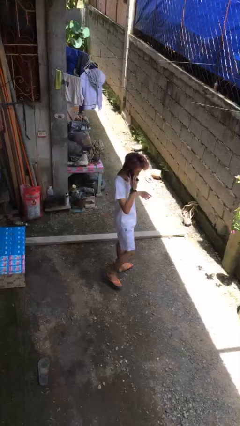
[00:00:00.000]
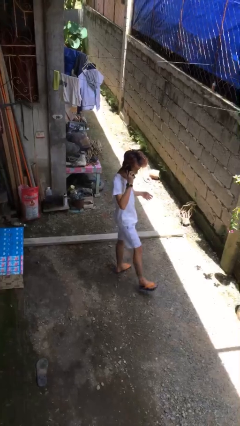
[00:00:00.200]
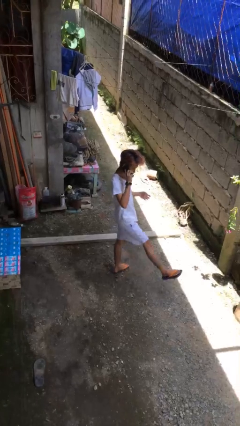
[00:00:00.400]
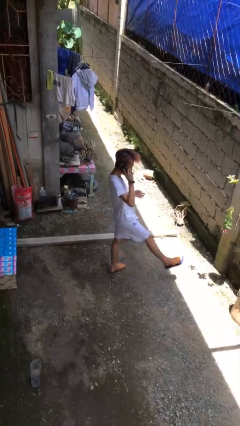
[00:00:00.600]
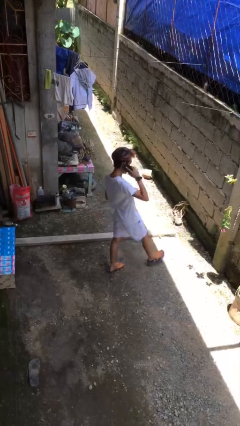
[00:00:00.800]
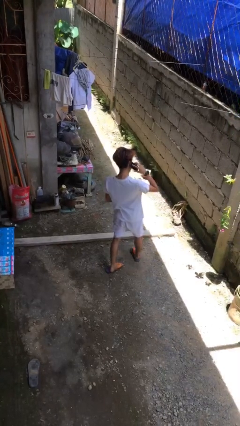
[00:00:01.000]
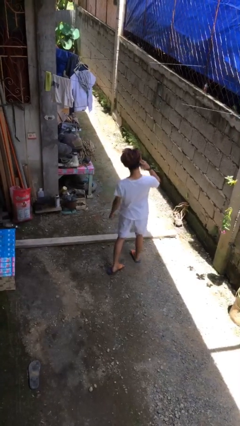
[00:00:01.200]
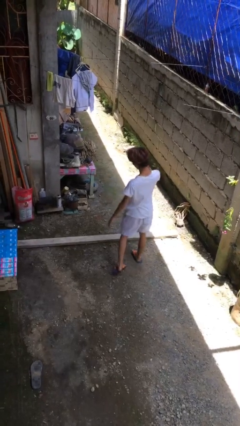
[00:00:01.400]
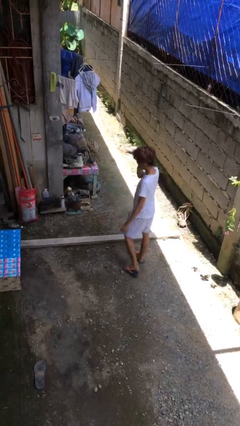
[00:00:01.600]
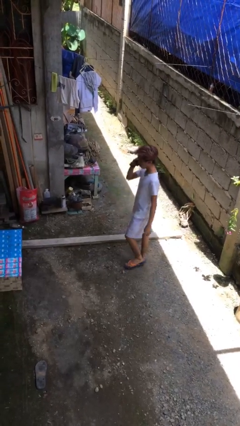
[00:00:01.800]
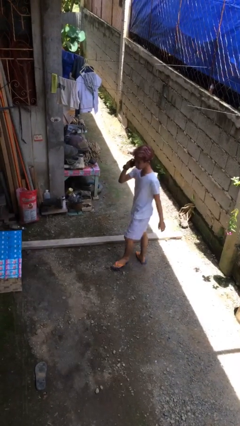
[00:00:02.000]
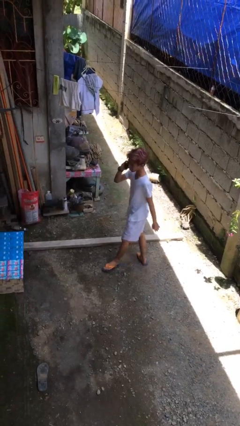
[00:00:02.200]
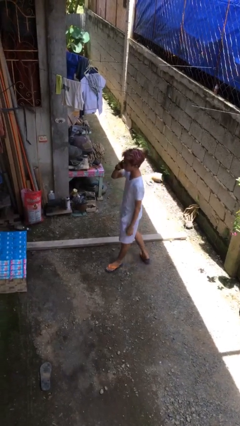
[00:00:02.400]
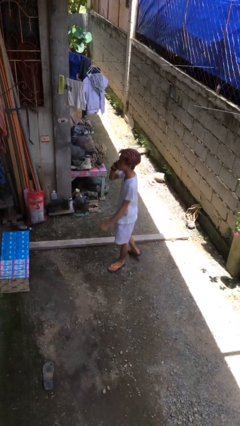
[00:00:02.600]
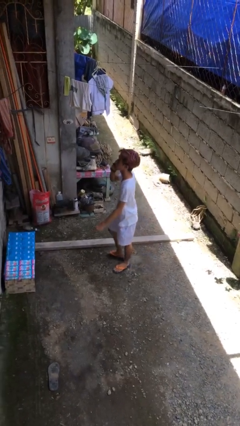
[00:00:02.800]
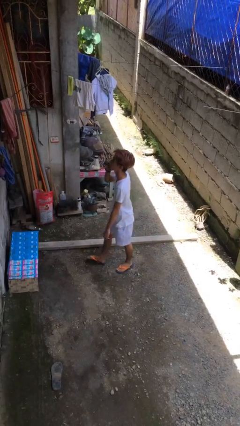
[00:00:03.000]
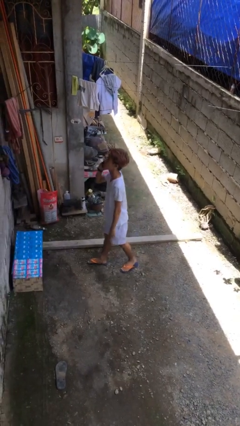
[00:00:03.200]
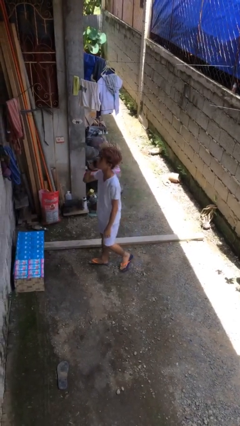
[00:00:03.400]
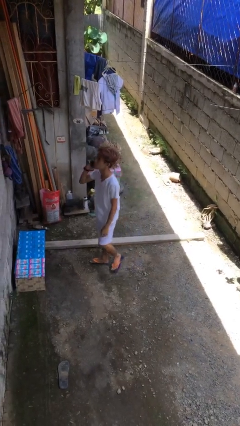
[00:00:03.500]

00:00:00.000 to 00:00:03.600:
person talks on phone

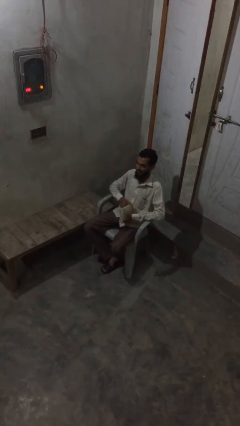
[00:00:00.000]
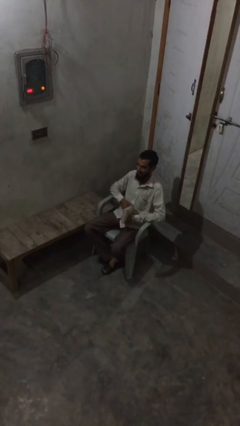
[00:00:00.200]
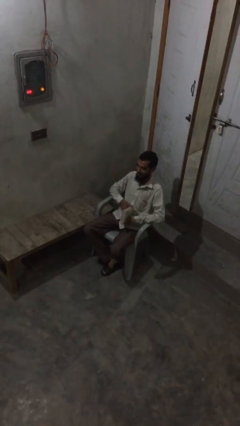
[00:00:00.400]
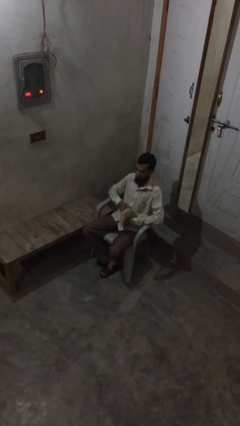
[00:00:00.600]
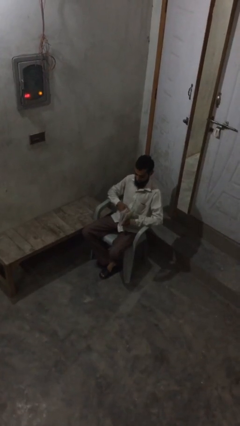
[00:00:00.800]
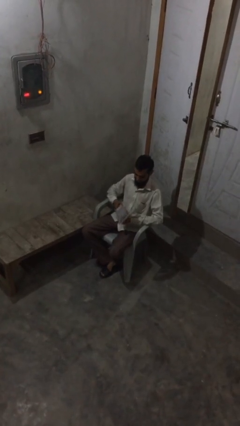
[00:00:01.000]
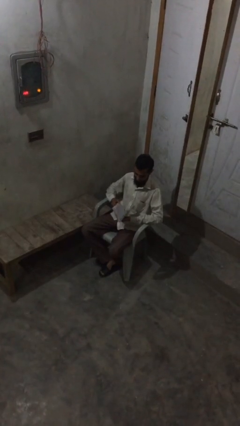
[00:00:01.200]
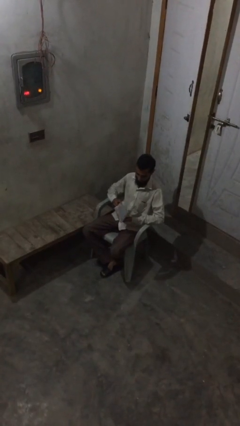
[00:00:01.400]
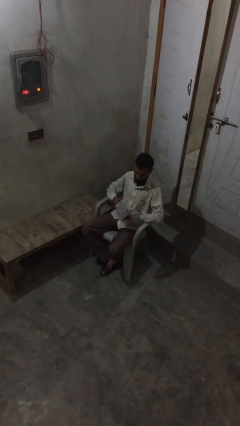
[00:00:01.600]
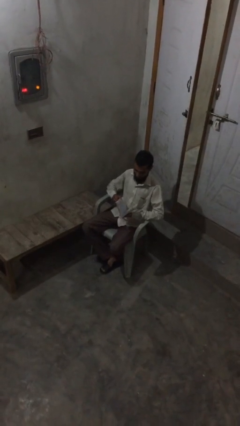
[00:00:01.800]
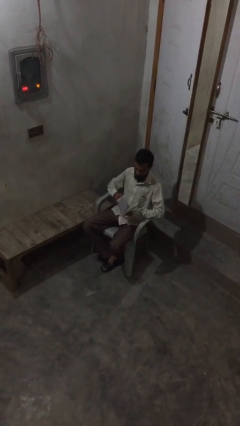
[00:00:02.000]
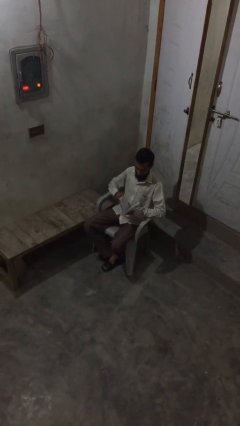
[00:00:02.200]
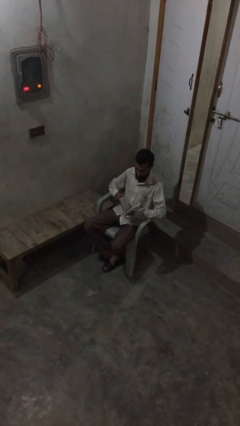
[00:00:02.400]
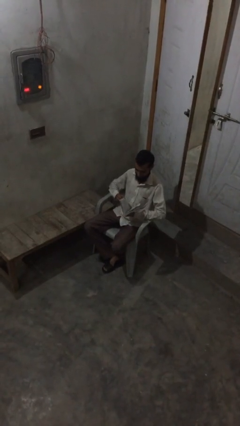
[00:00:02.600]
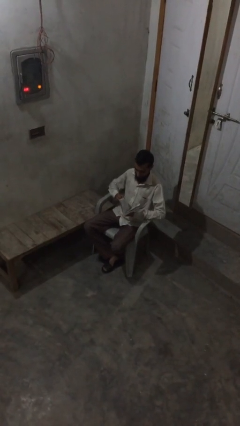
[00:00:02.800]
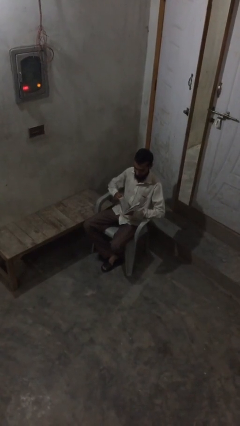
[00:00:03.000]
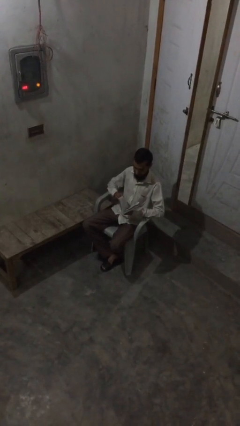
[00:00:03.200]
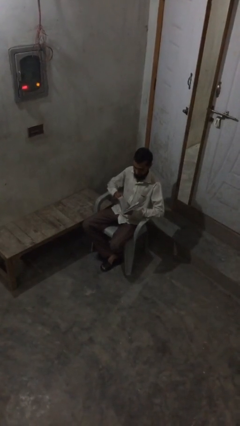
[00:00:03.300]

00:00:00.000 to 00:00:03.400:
person reads document

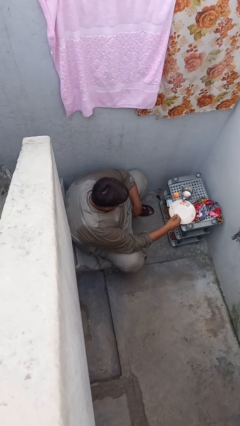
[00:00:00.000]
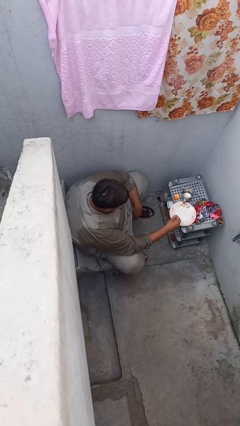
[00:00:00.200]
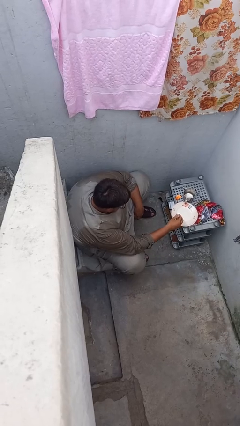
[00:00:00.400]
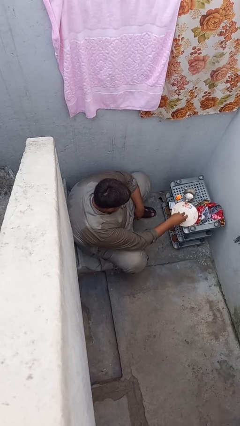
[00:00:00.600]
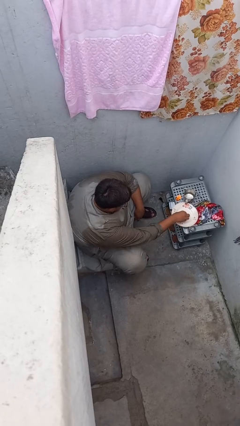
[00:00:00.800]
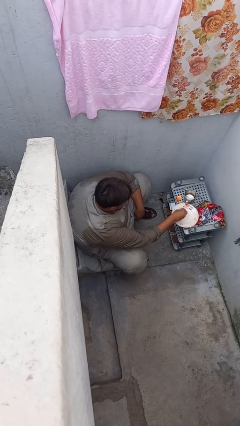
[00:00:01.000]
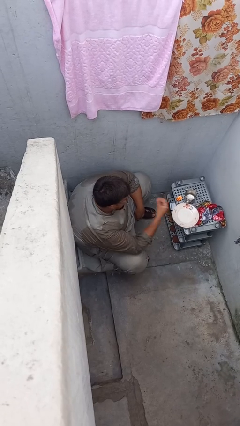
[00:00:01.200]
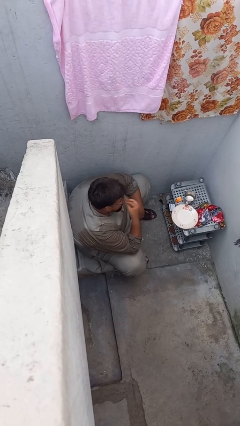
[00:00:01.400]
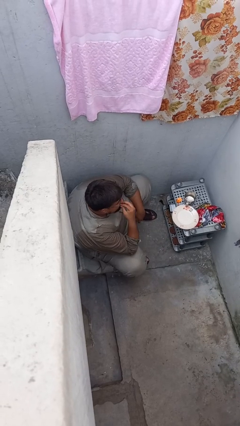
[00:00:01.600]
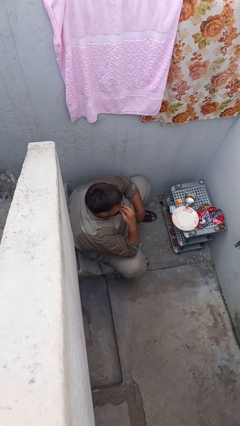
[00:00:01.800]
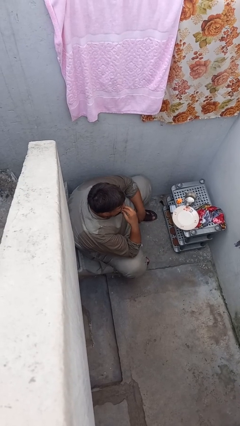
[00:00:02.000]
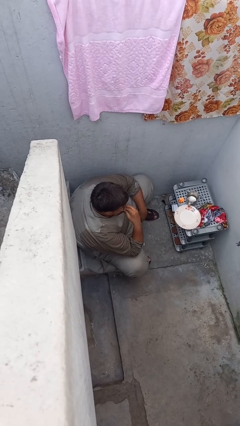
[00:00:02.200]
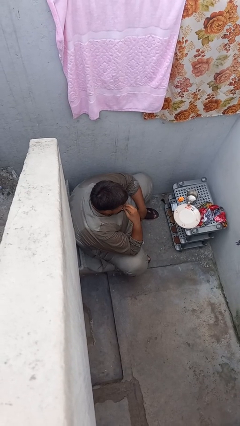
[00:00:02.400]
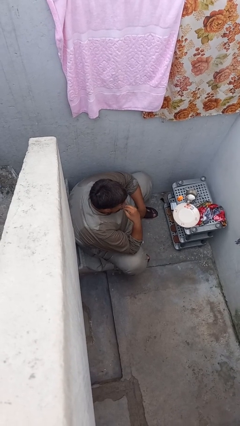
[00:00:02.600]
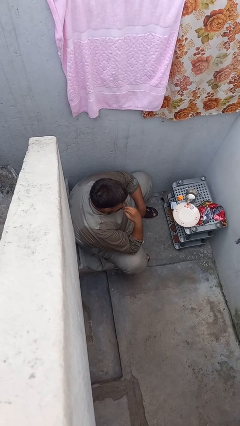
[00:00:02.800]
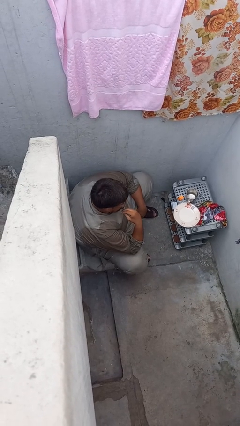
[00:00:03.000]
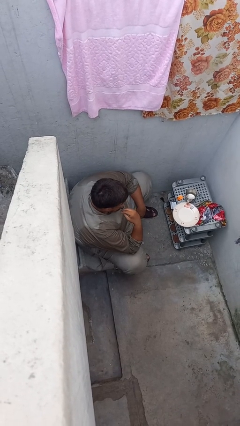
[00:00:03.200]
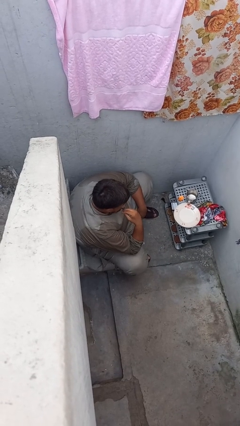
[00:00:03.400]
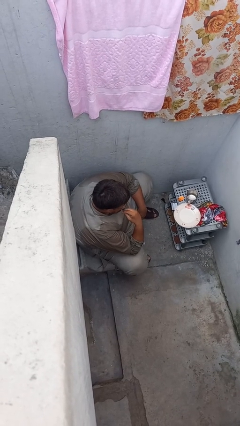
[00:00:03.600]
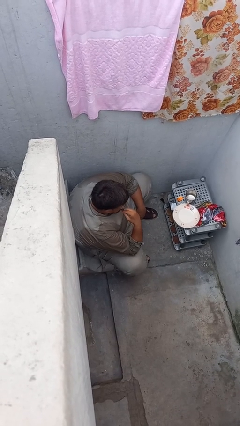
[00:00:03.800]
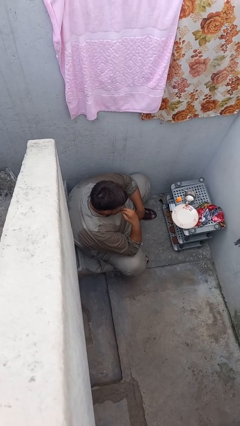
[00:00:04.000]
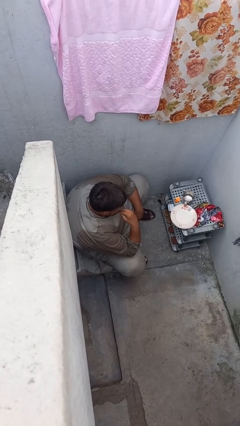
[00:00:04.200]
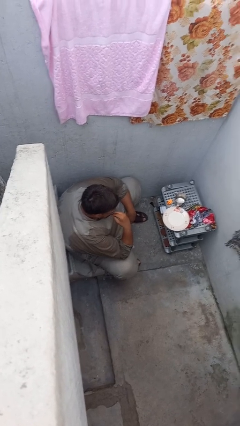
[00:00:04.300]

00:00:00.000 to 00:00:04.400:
person eats with hands

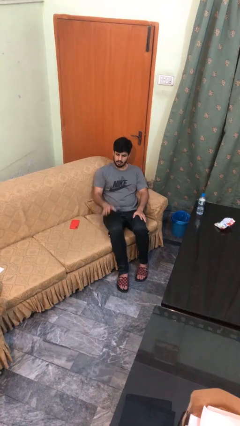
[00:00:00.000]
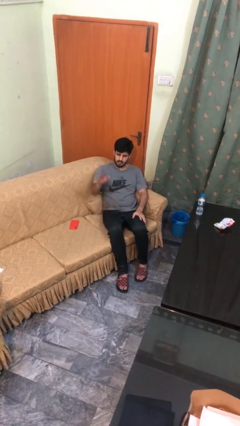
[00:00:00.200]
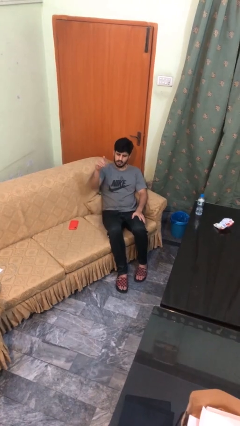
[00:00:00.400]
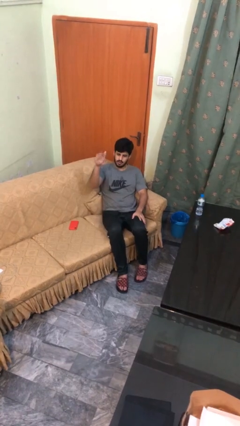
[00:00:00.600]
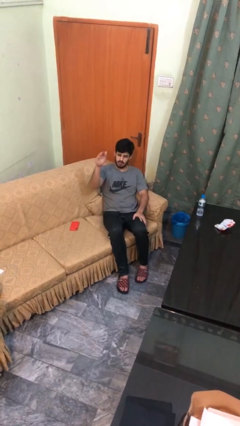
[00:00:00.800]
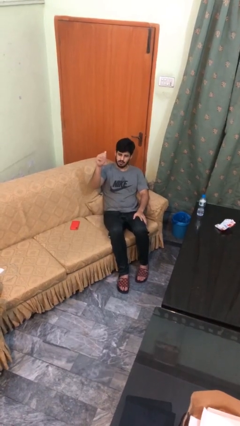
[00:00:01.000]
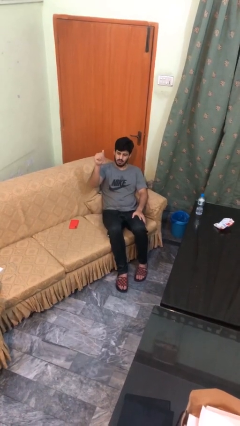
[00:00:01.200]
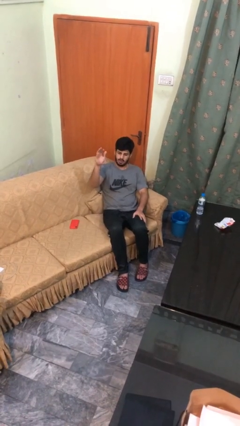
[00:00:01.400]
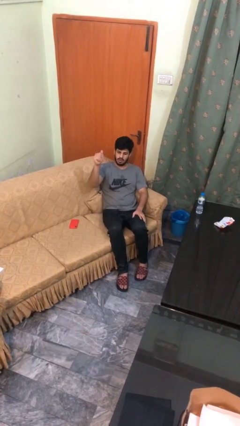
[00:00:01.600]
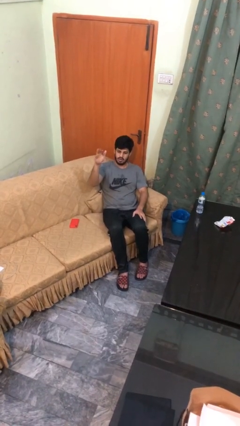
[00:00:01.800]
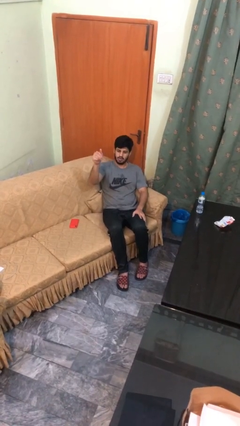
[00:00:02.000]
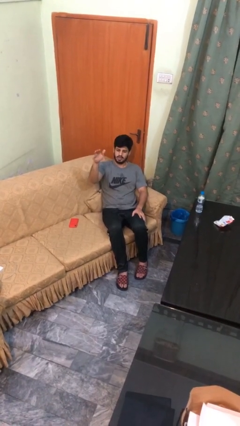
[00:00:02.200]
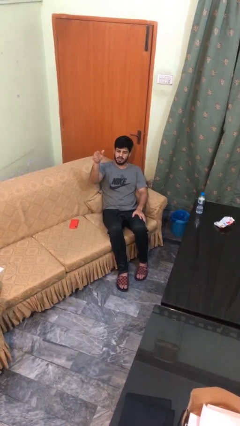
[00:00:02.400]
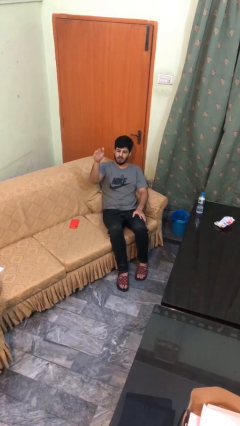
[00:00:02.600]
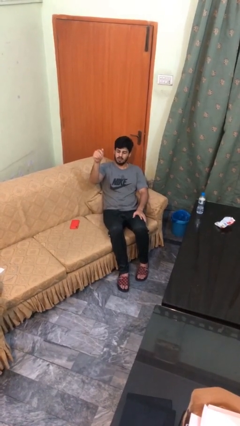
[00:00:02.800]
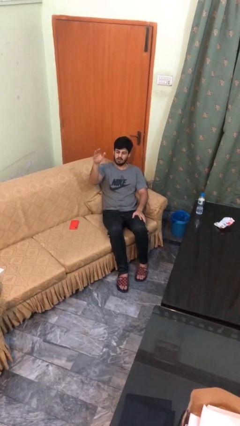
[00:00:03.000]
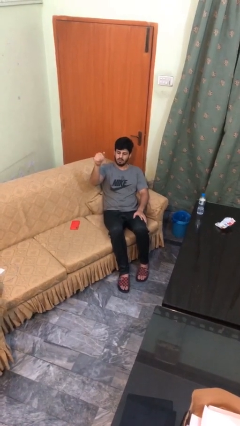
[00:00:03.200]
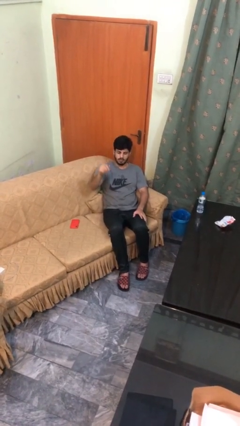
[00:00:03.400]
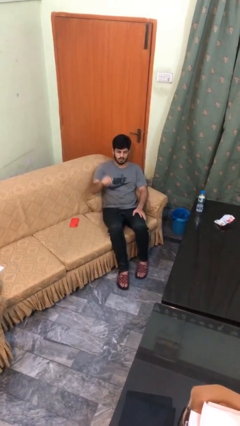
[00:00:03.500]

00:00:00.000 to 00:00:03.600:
person gestures come here

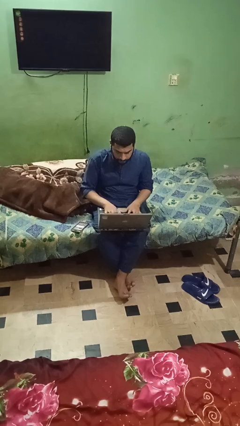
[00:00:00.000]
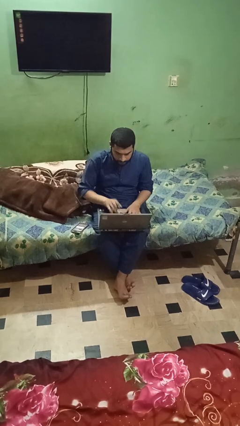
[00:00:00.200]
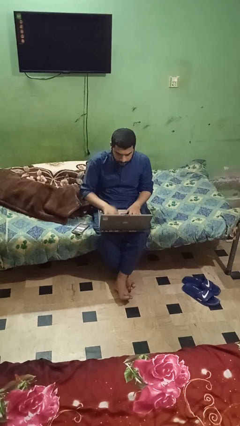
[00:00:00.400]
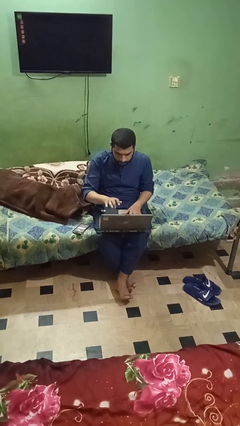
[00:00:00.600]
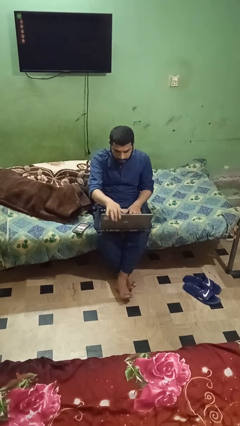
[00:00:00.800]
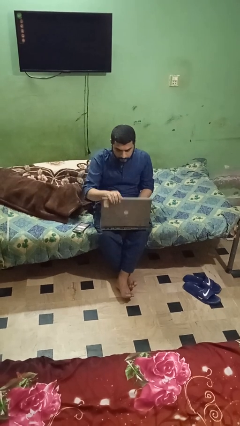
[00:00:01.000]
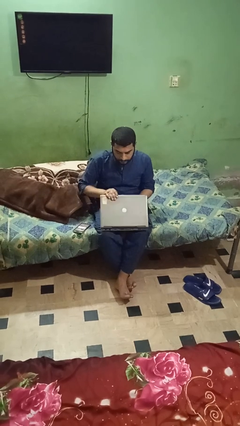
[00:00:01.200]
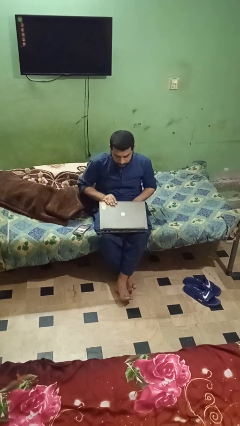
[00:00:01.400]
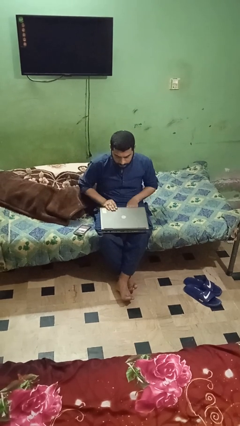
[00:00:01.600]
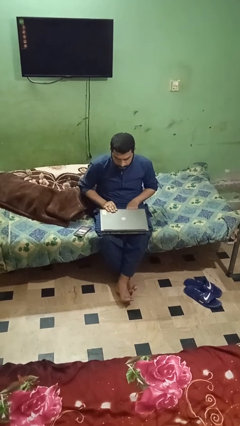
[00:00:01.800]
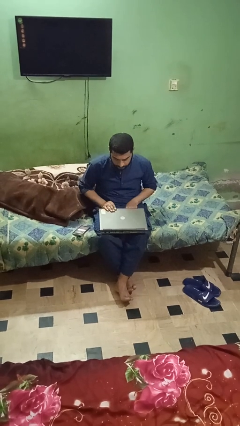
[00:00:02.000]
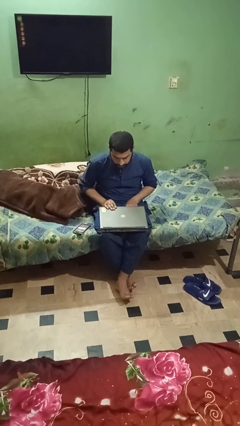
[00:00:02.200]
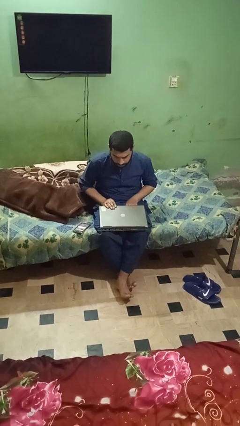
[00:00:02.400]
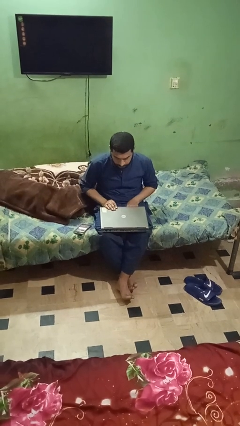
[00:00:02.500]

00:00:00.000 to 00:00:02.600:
person closes laptop
